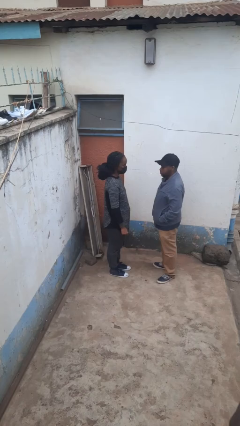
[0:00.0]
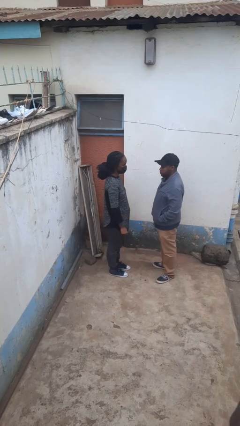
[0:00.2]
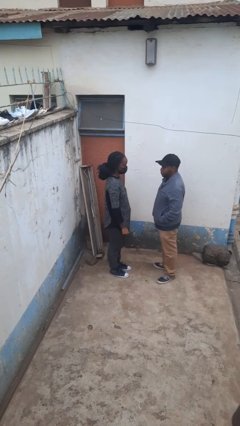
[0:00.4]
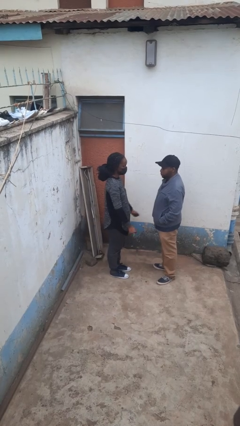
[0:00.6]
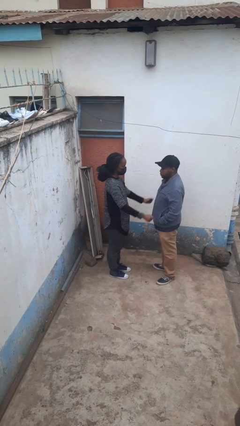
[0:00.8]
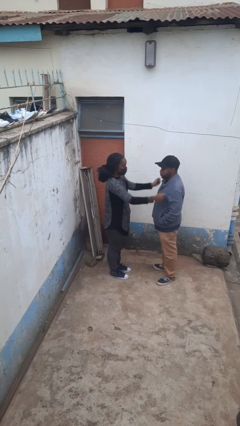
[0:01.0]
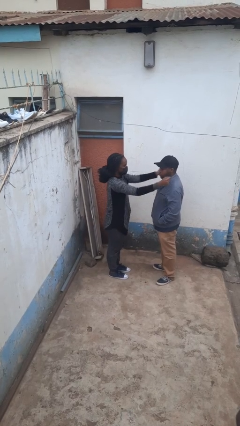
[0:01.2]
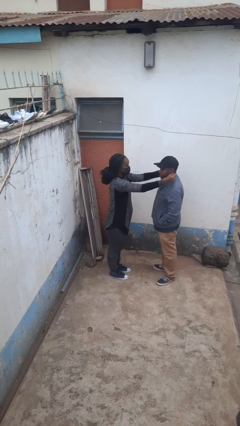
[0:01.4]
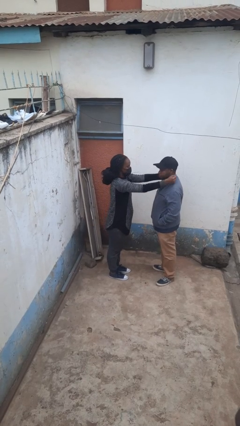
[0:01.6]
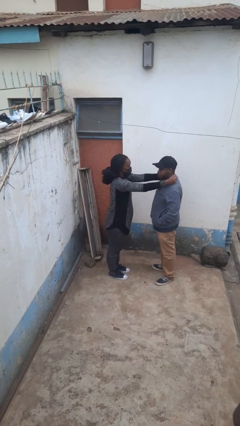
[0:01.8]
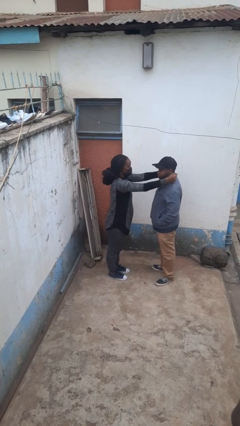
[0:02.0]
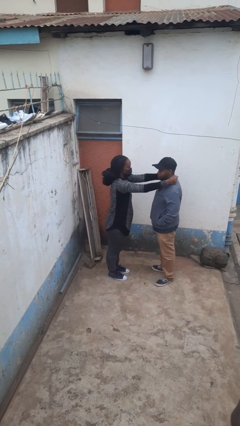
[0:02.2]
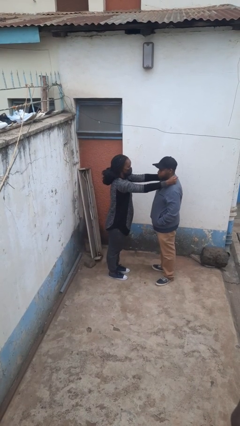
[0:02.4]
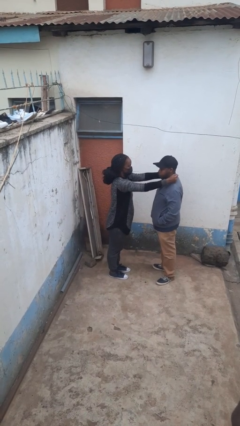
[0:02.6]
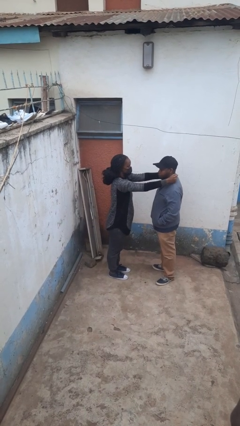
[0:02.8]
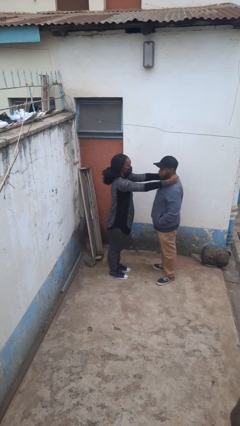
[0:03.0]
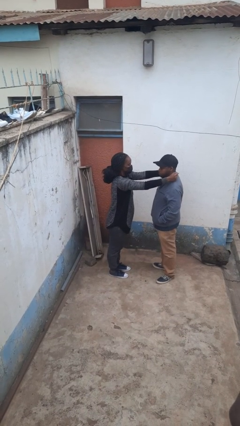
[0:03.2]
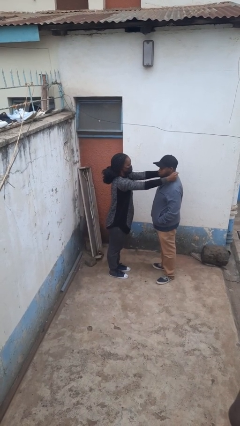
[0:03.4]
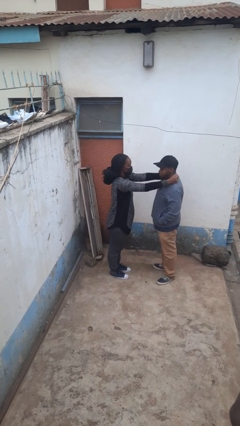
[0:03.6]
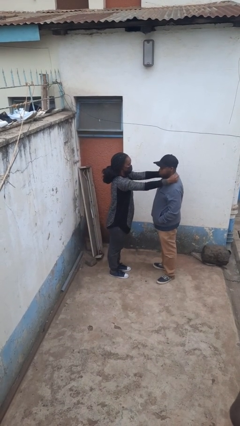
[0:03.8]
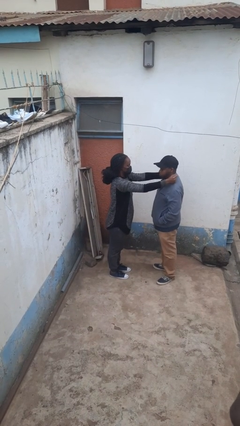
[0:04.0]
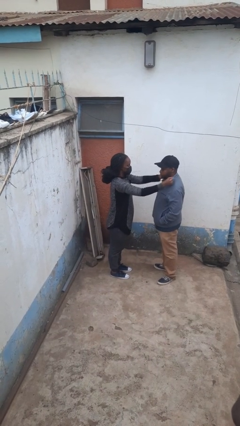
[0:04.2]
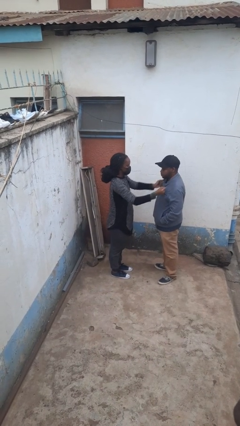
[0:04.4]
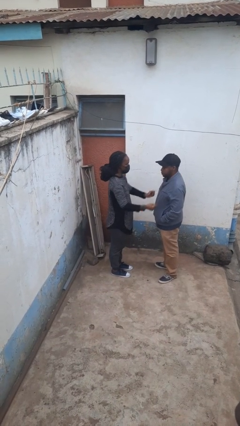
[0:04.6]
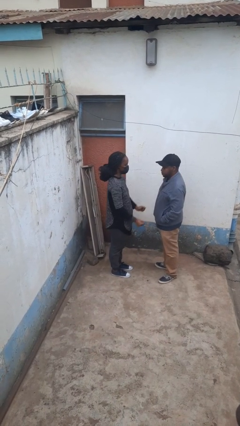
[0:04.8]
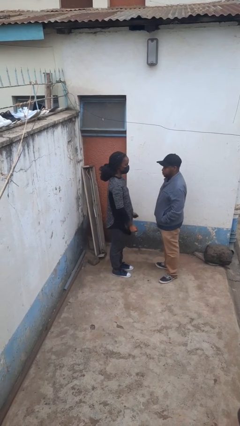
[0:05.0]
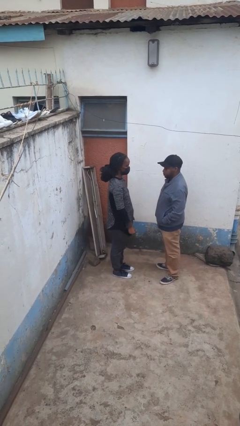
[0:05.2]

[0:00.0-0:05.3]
person pounds shoulders of person

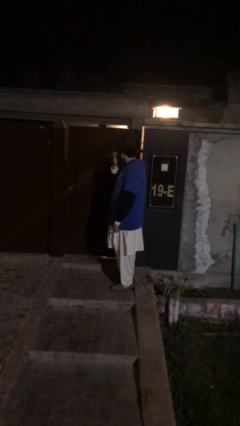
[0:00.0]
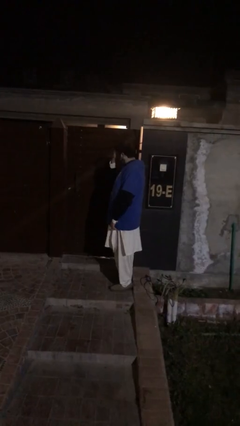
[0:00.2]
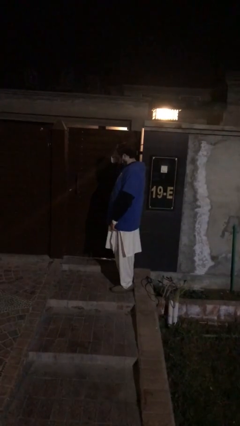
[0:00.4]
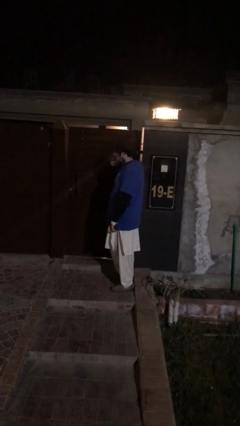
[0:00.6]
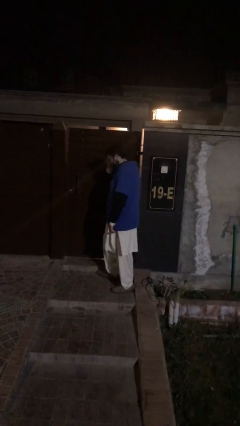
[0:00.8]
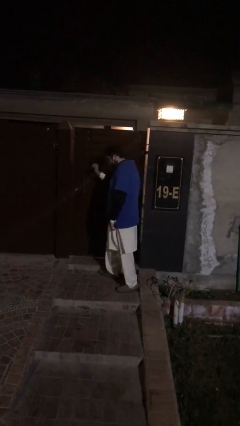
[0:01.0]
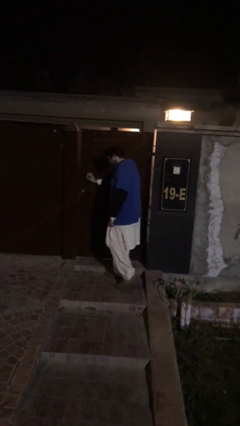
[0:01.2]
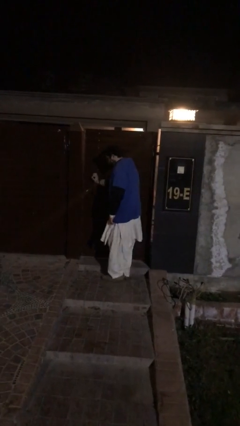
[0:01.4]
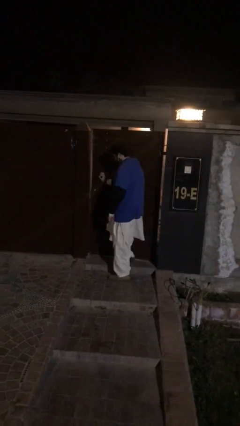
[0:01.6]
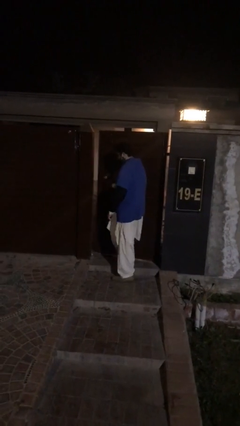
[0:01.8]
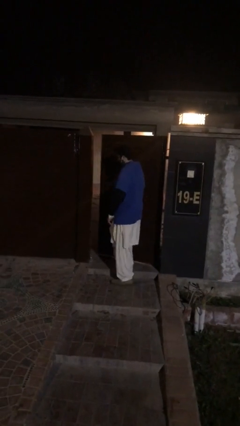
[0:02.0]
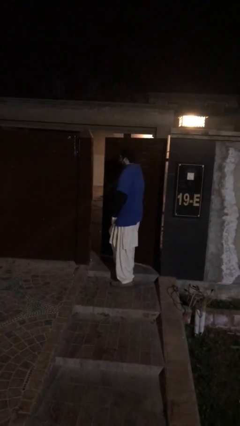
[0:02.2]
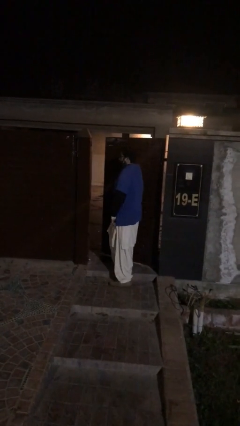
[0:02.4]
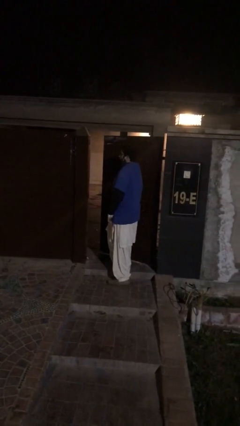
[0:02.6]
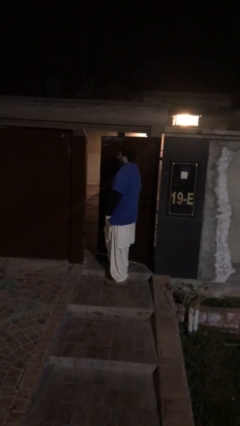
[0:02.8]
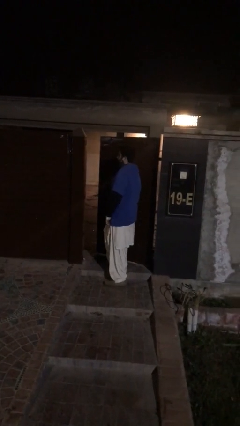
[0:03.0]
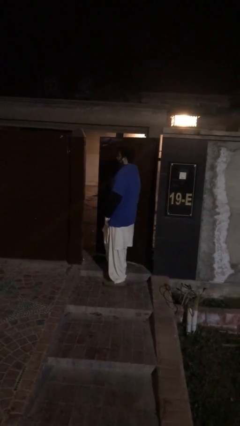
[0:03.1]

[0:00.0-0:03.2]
person opens facility door

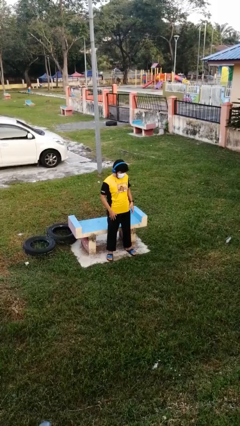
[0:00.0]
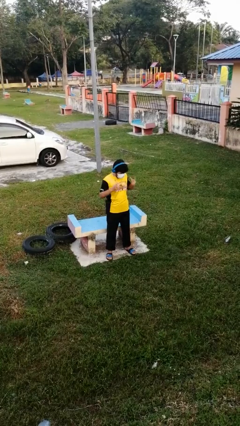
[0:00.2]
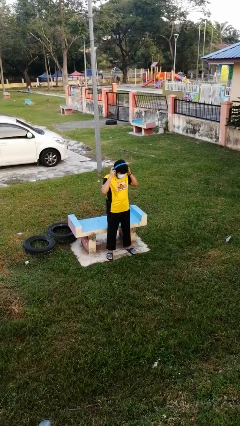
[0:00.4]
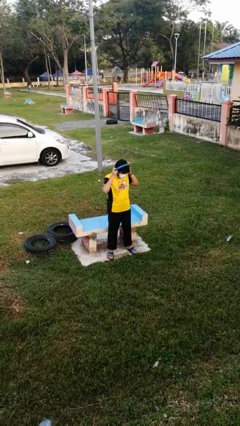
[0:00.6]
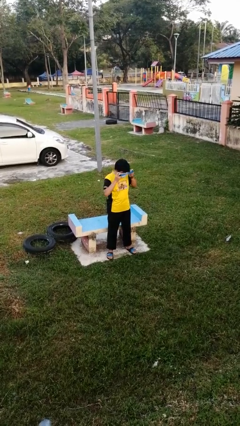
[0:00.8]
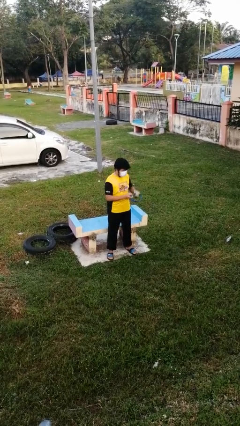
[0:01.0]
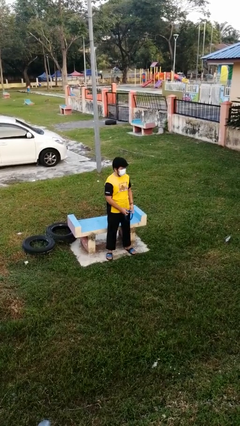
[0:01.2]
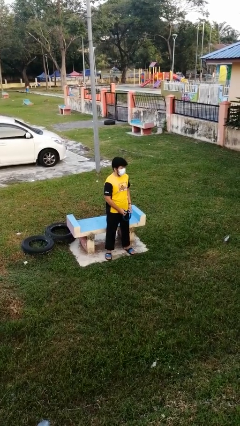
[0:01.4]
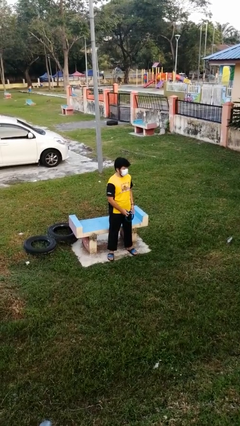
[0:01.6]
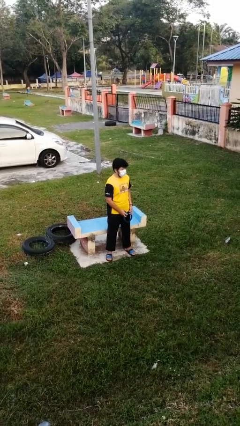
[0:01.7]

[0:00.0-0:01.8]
person takes off headphones

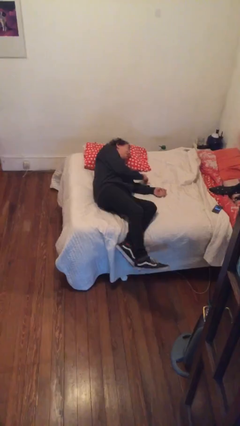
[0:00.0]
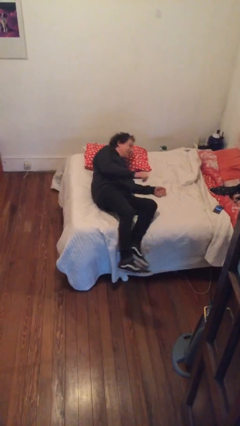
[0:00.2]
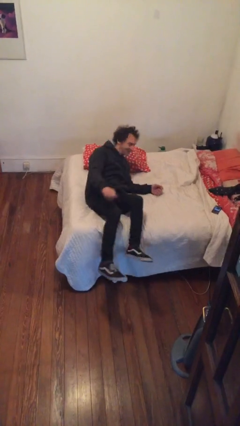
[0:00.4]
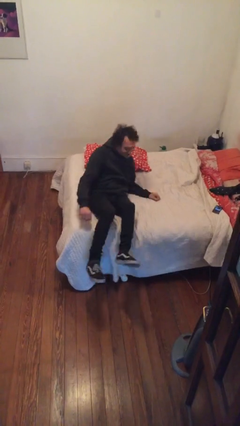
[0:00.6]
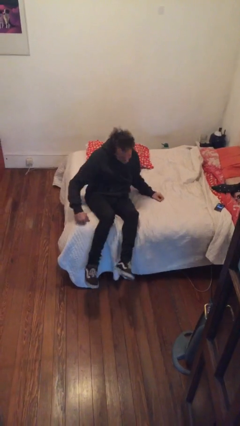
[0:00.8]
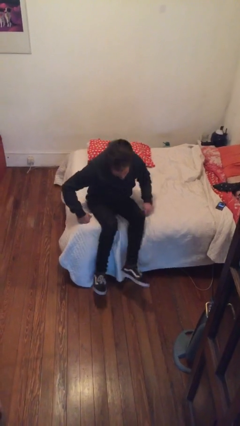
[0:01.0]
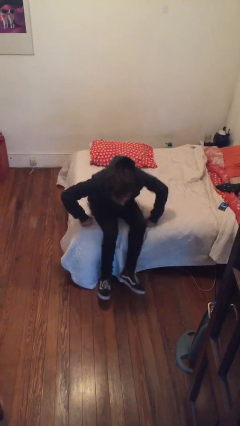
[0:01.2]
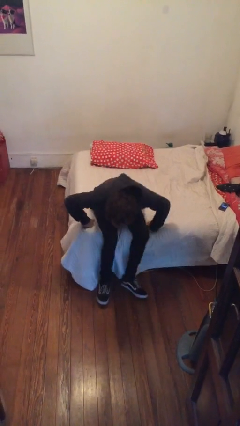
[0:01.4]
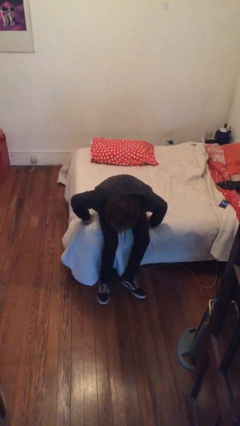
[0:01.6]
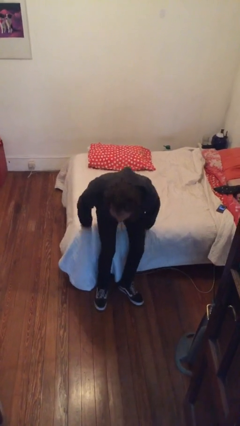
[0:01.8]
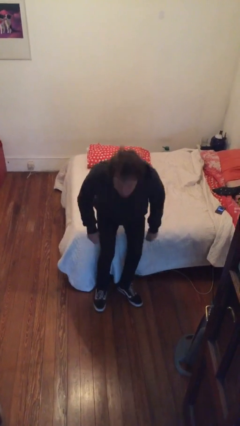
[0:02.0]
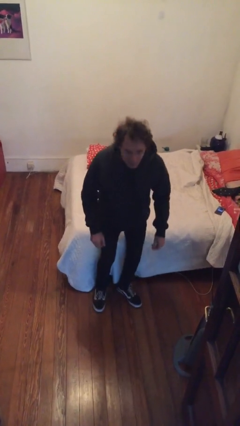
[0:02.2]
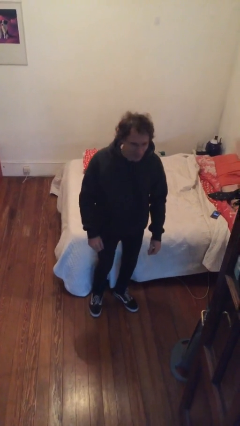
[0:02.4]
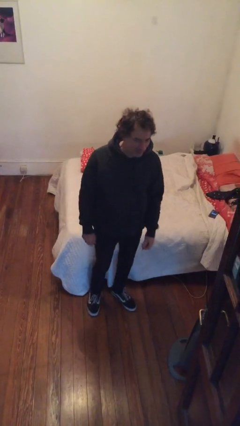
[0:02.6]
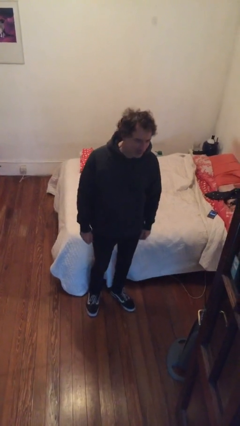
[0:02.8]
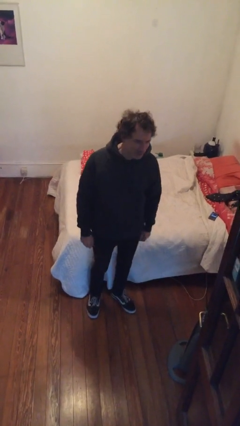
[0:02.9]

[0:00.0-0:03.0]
person stands up

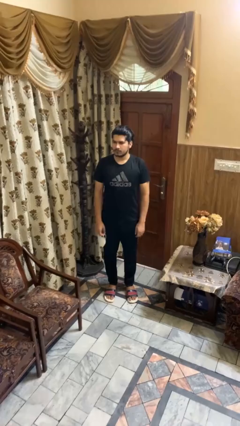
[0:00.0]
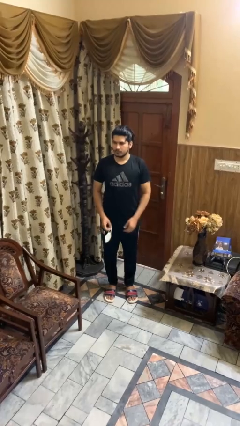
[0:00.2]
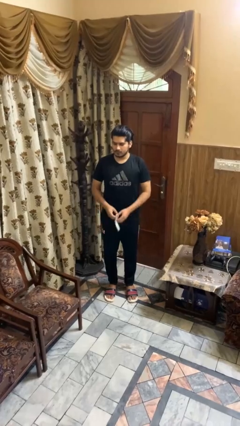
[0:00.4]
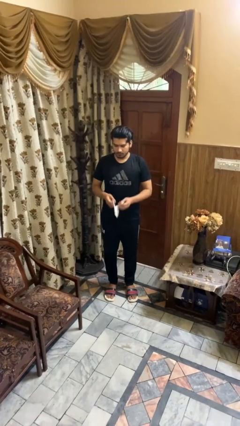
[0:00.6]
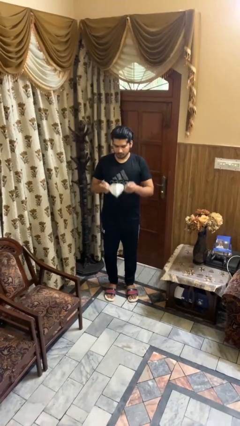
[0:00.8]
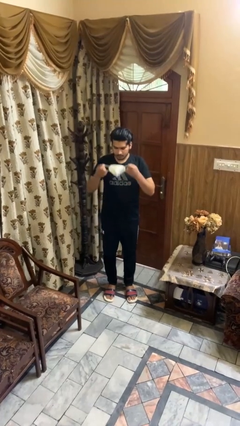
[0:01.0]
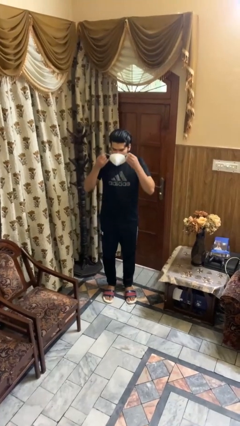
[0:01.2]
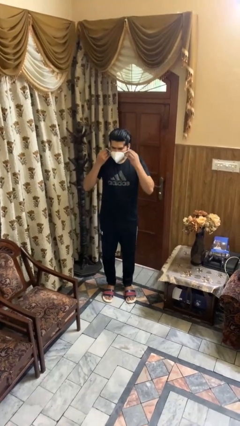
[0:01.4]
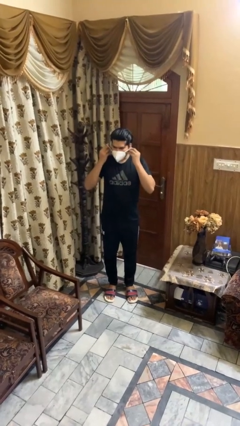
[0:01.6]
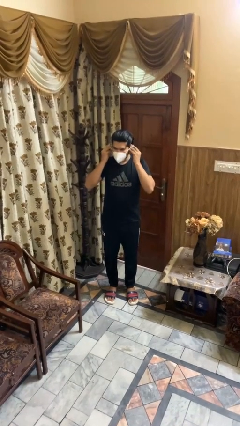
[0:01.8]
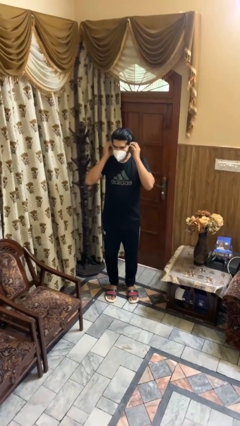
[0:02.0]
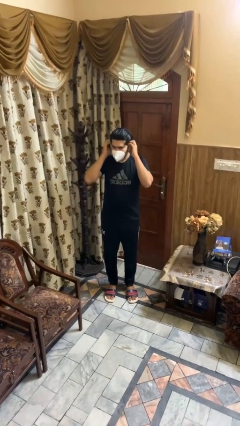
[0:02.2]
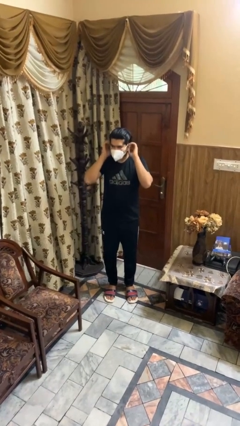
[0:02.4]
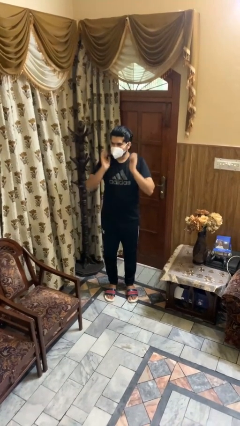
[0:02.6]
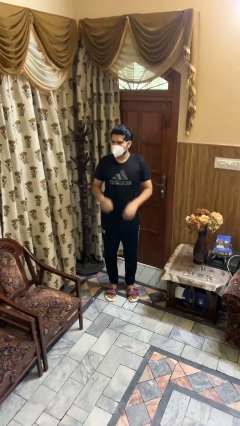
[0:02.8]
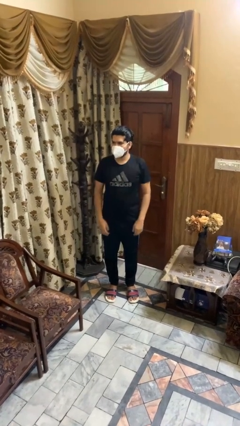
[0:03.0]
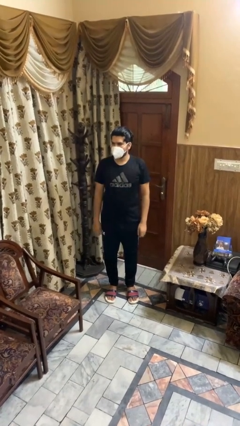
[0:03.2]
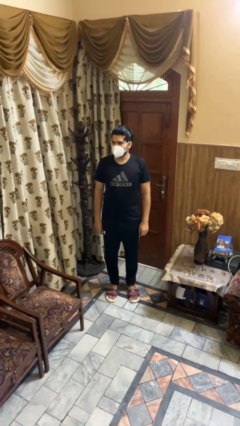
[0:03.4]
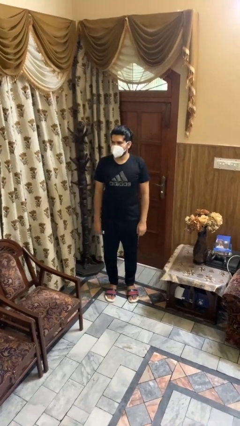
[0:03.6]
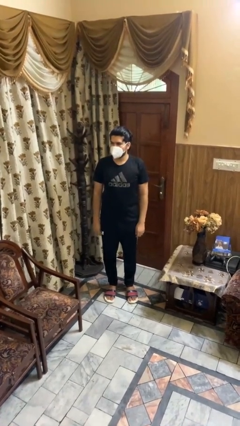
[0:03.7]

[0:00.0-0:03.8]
person puts on facemask

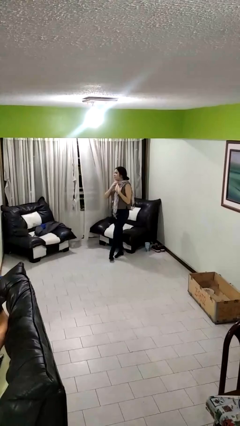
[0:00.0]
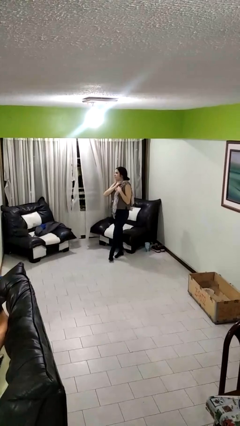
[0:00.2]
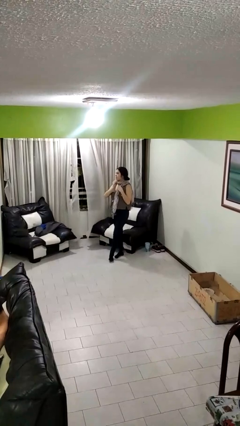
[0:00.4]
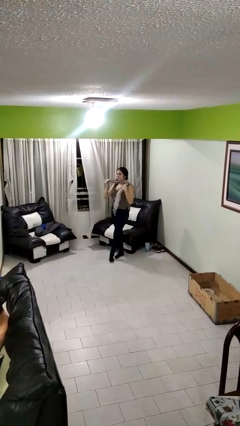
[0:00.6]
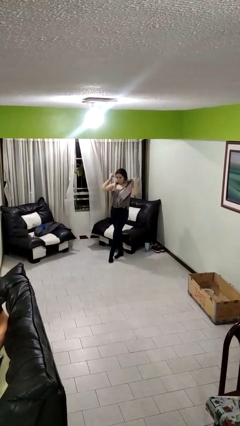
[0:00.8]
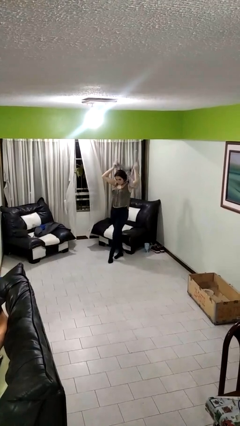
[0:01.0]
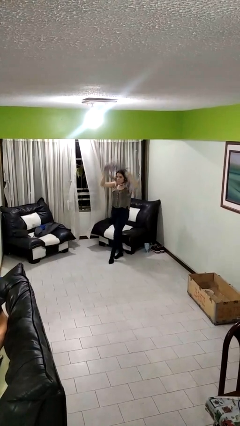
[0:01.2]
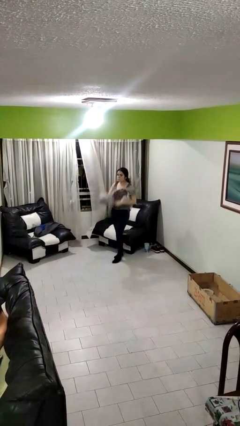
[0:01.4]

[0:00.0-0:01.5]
person takes off scarf
